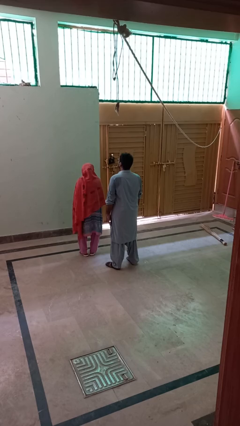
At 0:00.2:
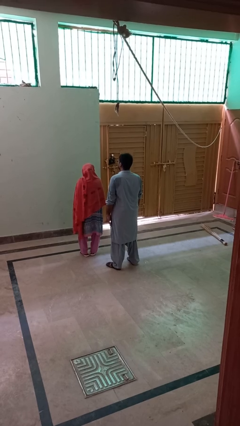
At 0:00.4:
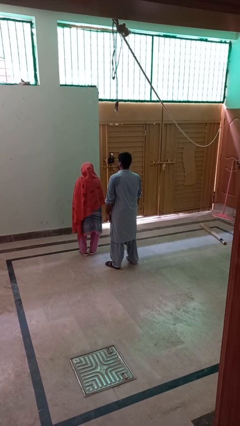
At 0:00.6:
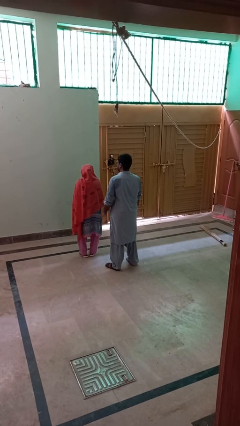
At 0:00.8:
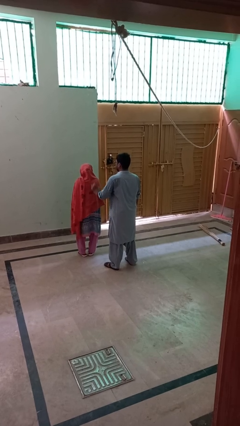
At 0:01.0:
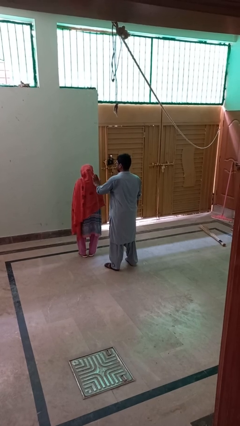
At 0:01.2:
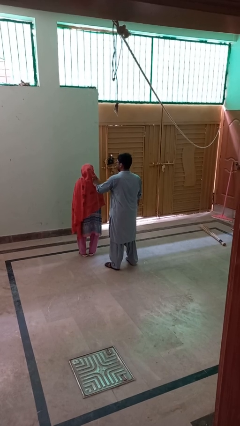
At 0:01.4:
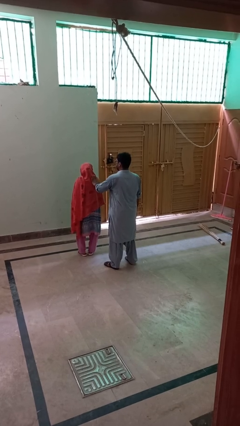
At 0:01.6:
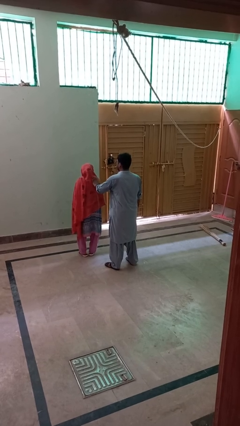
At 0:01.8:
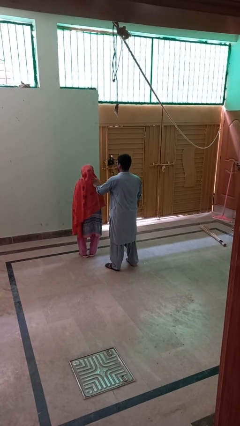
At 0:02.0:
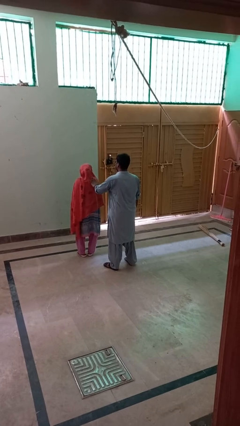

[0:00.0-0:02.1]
person touches back of person

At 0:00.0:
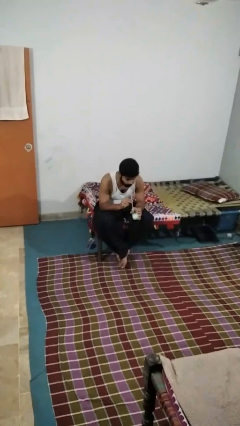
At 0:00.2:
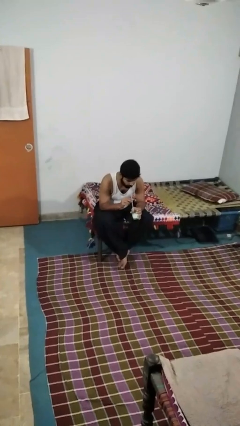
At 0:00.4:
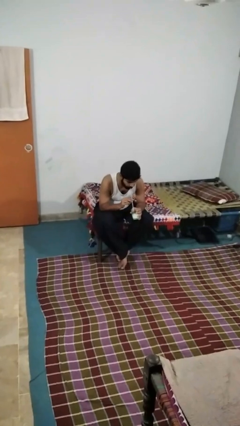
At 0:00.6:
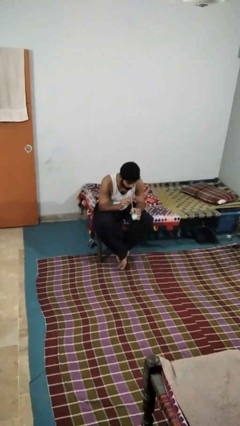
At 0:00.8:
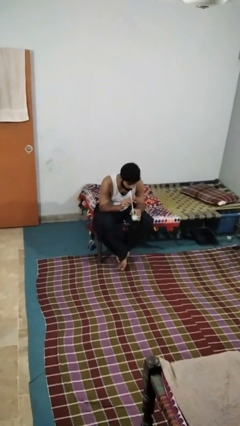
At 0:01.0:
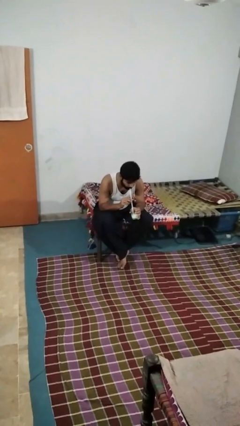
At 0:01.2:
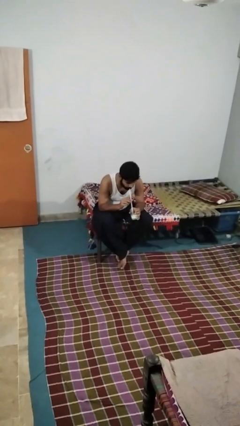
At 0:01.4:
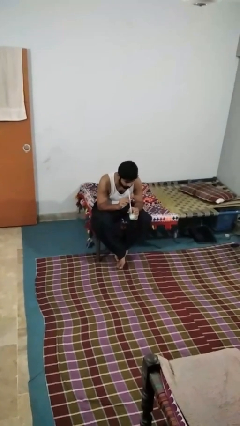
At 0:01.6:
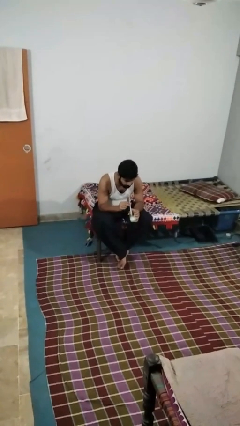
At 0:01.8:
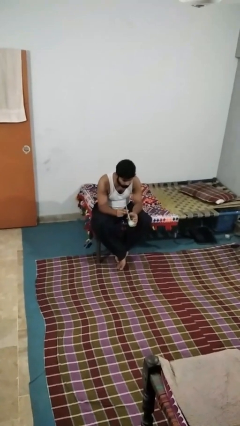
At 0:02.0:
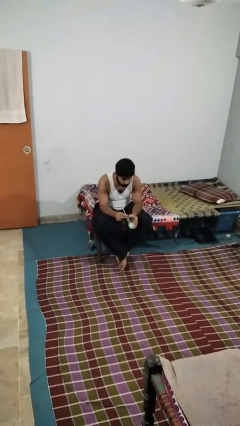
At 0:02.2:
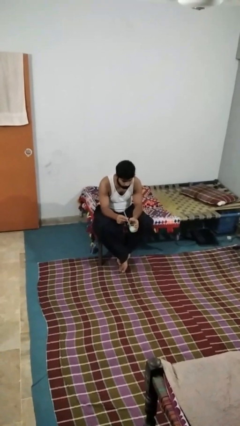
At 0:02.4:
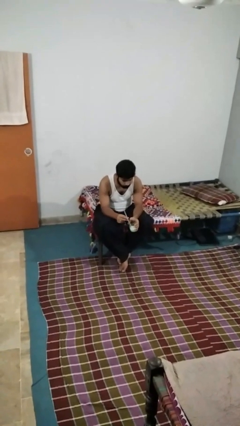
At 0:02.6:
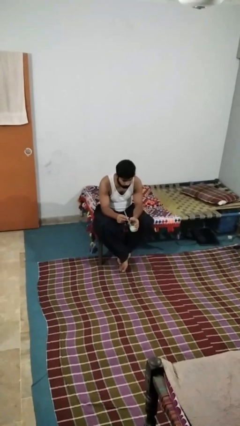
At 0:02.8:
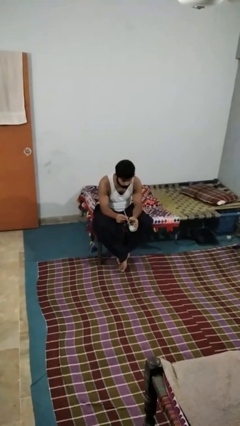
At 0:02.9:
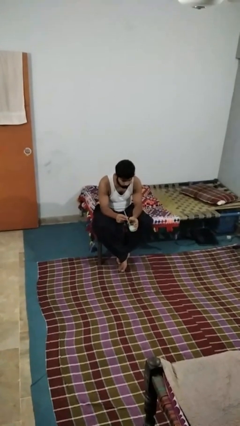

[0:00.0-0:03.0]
person drinks from straw

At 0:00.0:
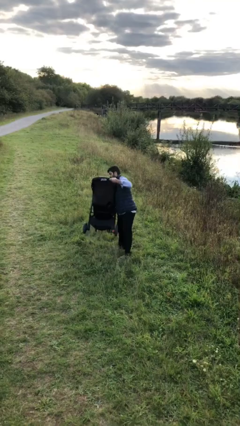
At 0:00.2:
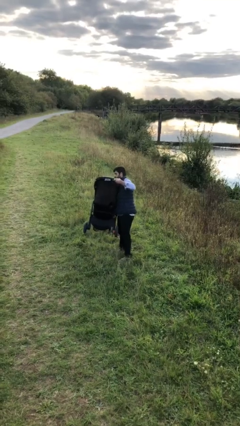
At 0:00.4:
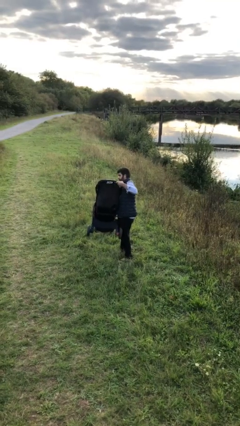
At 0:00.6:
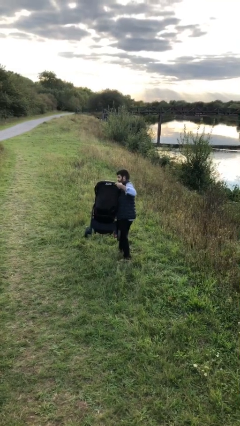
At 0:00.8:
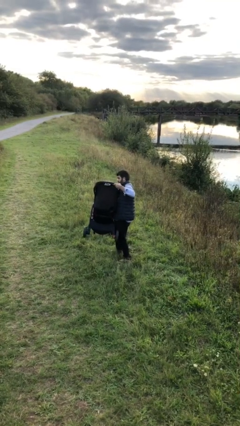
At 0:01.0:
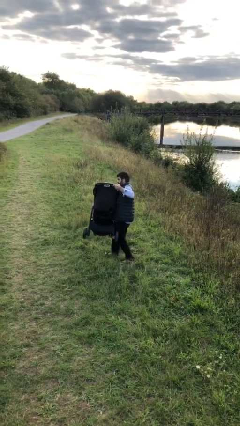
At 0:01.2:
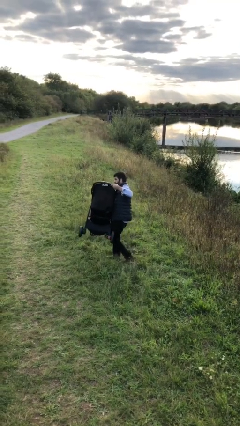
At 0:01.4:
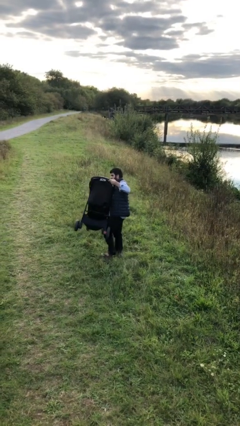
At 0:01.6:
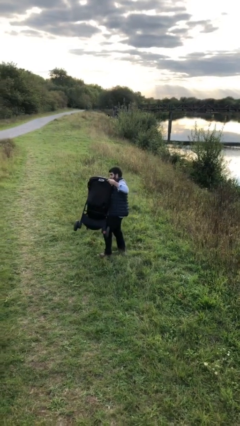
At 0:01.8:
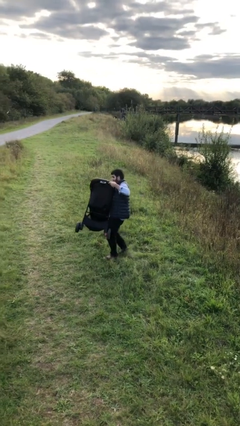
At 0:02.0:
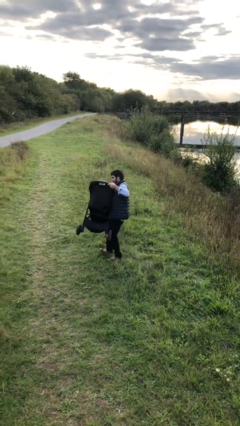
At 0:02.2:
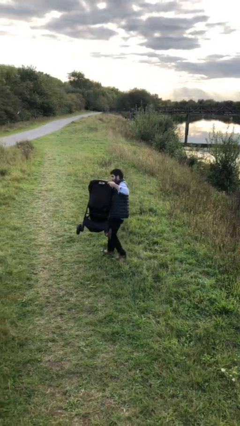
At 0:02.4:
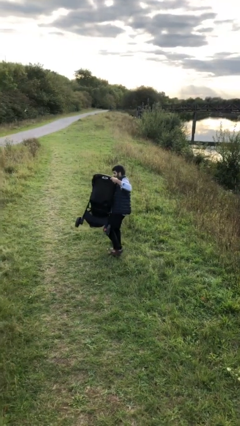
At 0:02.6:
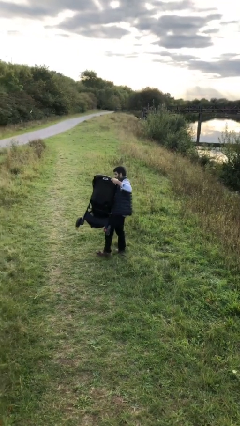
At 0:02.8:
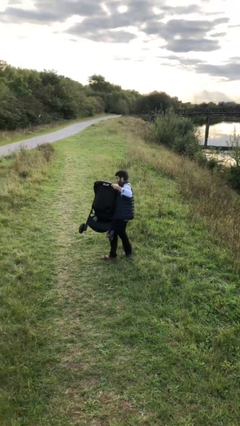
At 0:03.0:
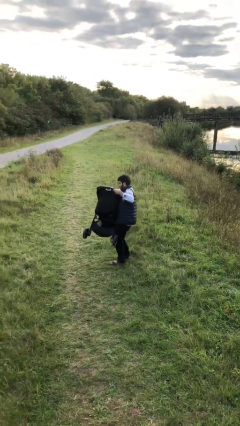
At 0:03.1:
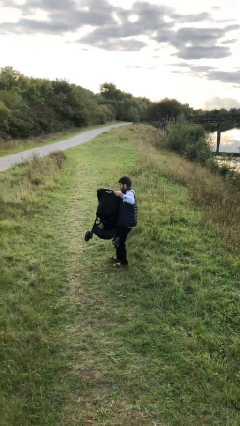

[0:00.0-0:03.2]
person carries heavy object

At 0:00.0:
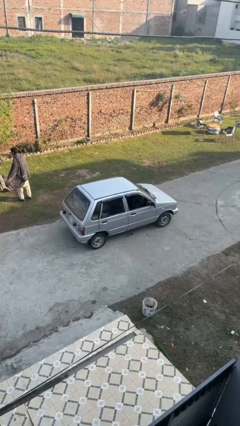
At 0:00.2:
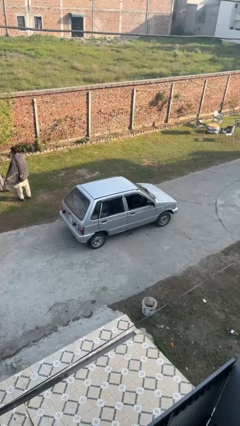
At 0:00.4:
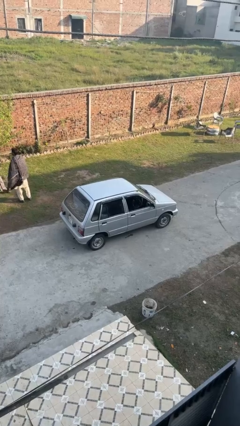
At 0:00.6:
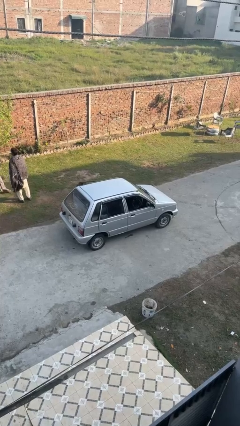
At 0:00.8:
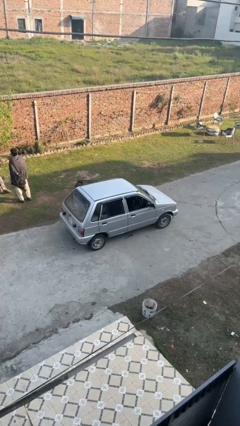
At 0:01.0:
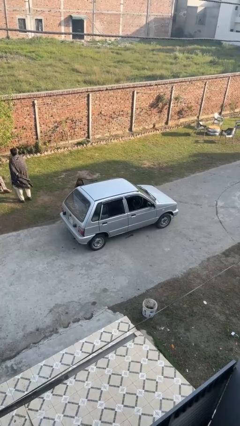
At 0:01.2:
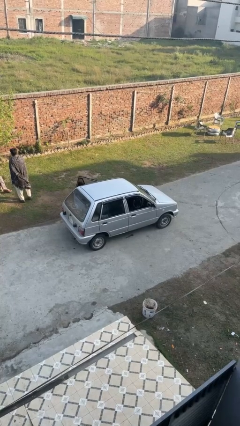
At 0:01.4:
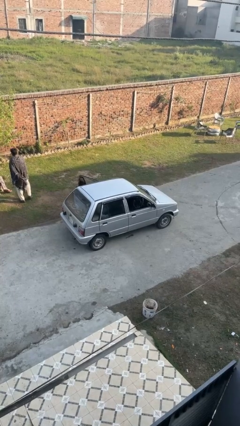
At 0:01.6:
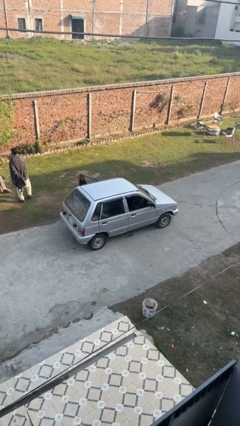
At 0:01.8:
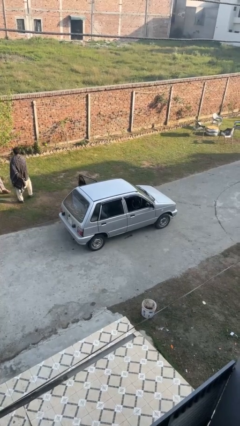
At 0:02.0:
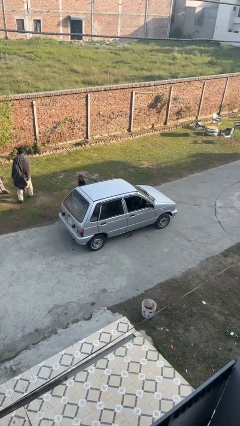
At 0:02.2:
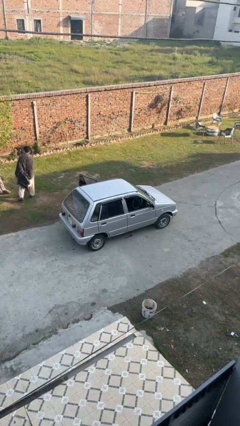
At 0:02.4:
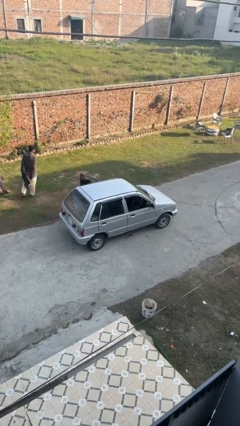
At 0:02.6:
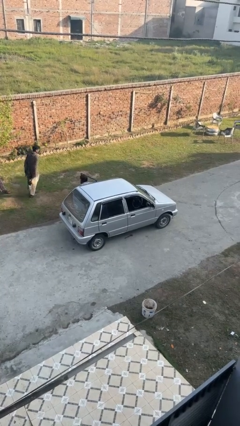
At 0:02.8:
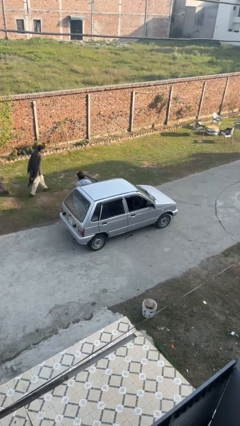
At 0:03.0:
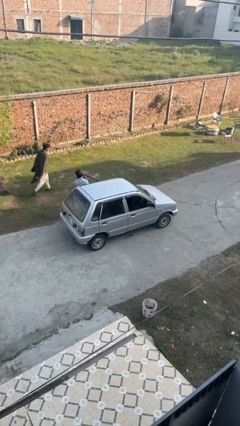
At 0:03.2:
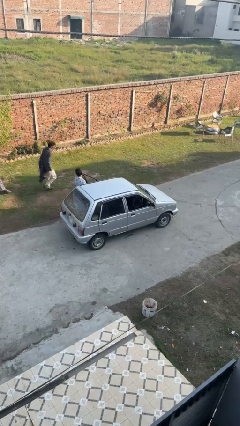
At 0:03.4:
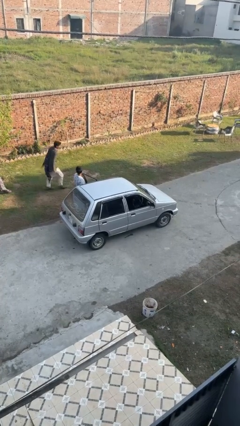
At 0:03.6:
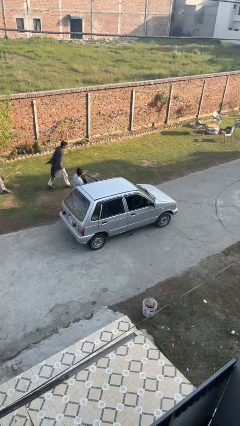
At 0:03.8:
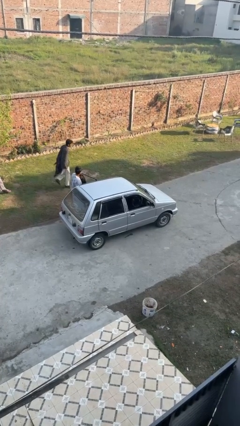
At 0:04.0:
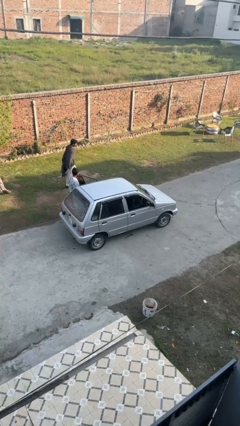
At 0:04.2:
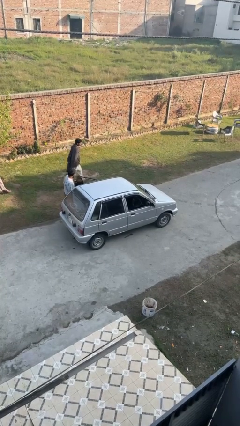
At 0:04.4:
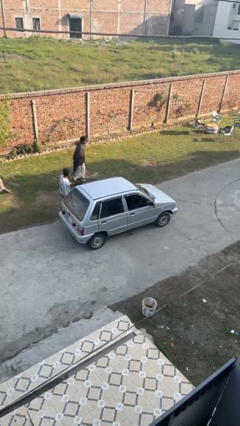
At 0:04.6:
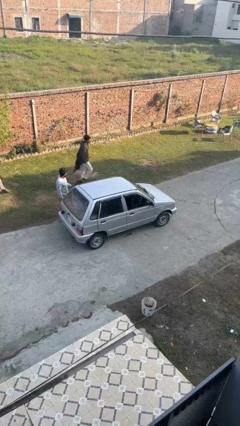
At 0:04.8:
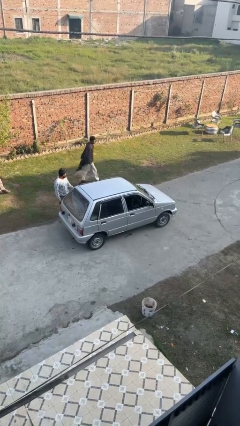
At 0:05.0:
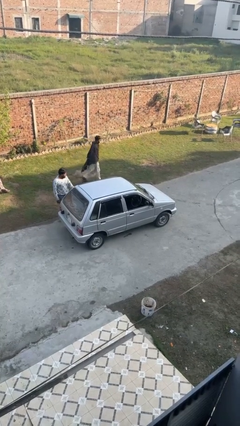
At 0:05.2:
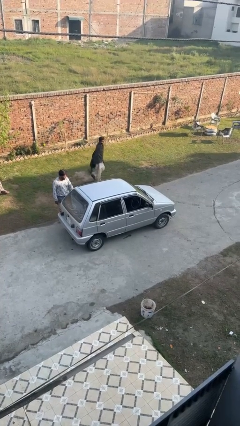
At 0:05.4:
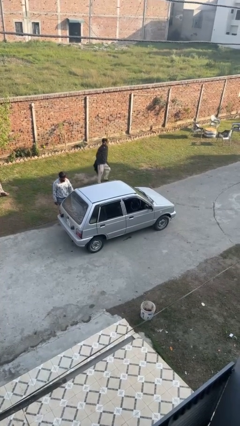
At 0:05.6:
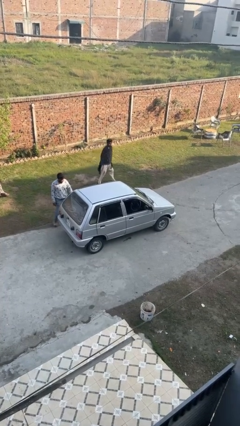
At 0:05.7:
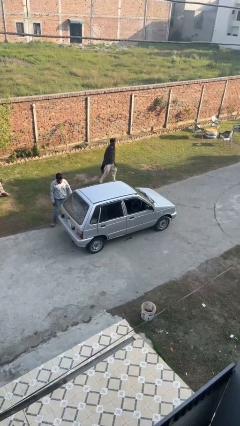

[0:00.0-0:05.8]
car drops off person

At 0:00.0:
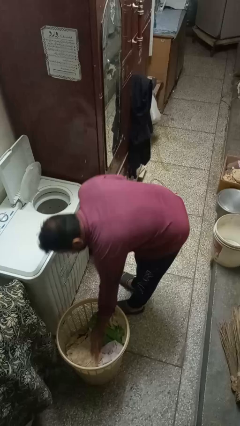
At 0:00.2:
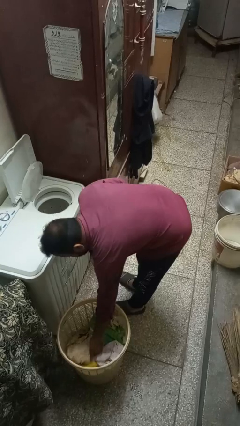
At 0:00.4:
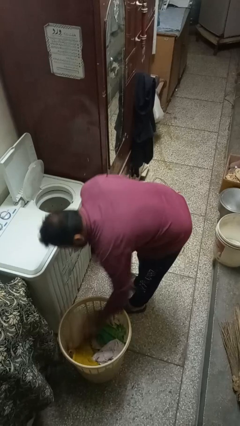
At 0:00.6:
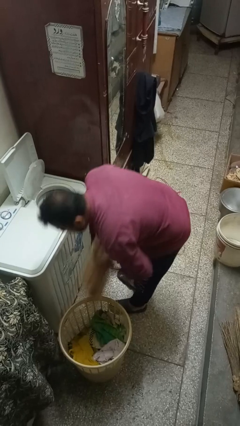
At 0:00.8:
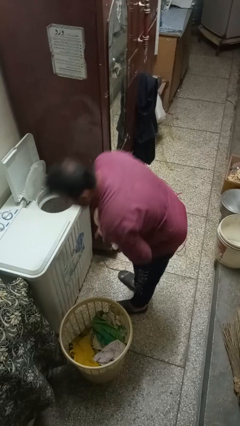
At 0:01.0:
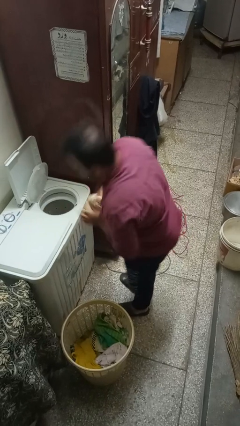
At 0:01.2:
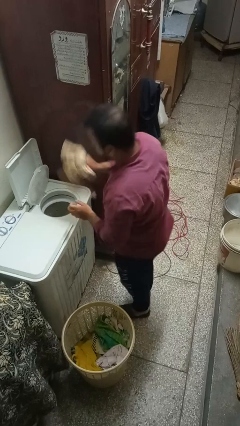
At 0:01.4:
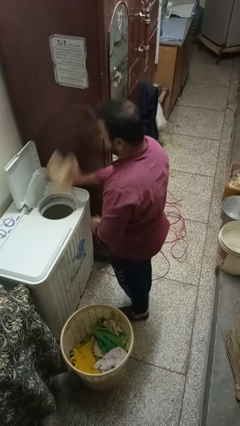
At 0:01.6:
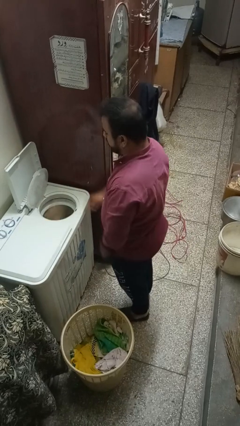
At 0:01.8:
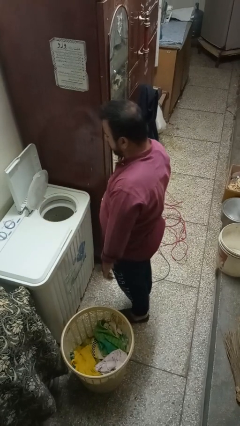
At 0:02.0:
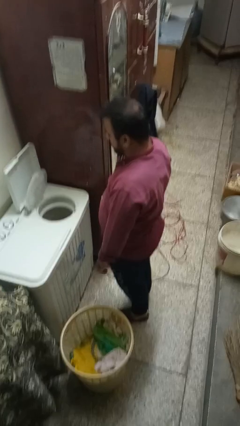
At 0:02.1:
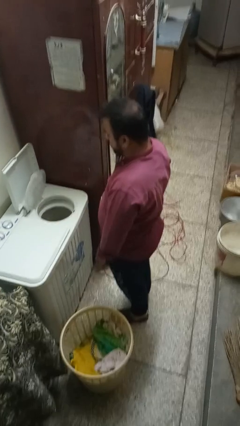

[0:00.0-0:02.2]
person loads dryer

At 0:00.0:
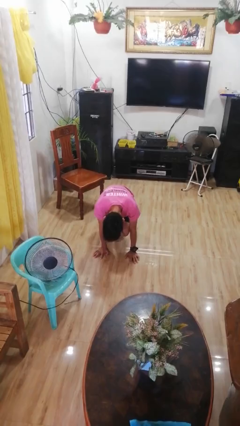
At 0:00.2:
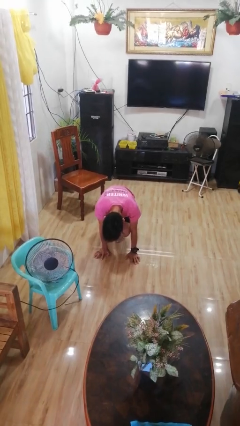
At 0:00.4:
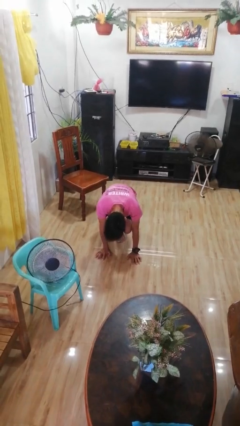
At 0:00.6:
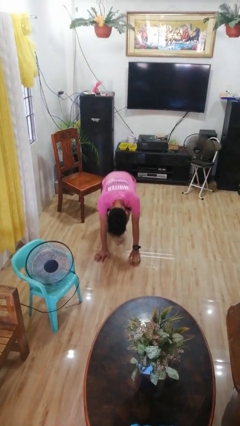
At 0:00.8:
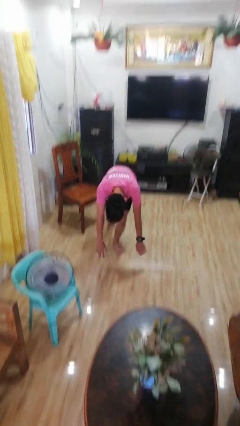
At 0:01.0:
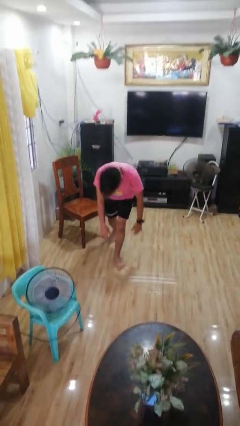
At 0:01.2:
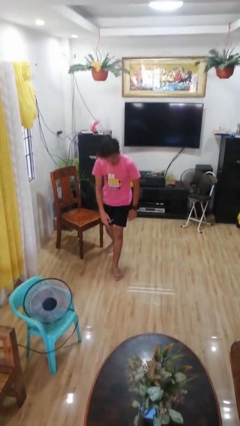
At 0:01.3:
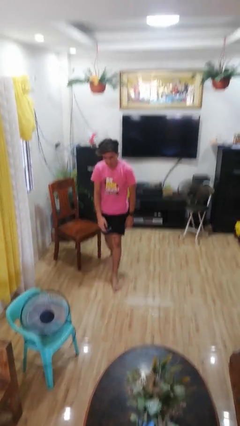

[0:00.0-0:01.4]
person stands up from floor
